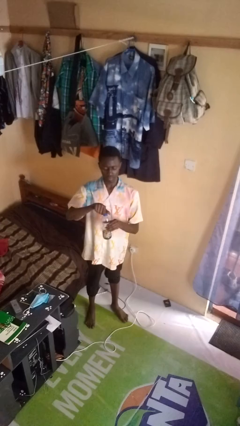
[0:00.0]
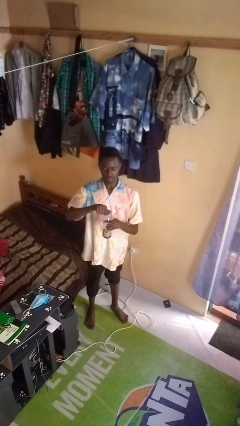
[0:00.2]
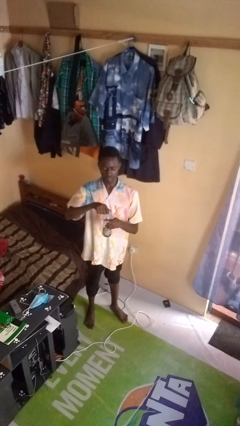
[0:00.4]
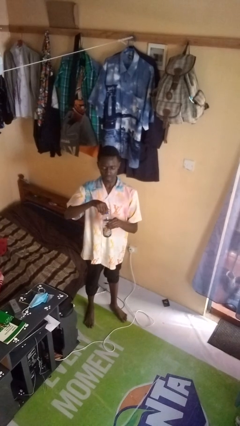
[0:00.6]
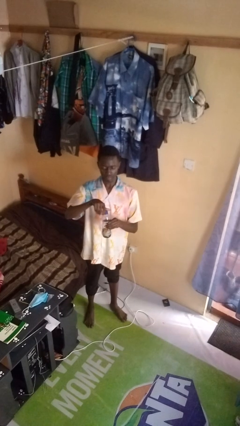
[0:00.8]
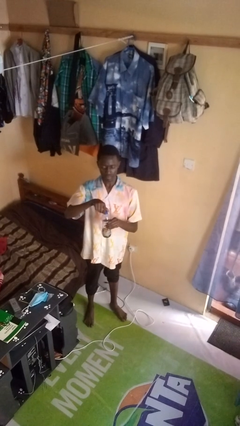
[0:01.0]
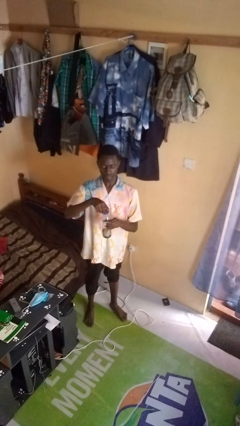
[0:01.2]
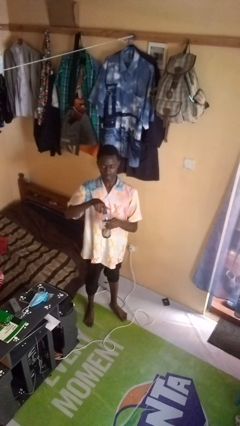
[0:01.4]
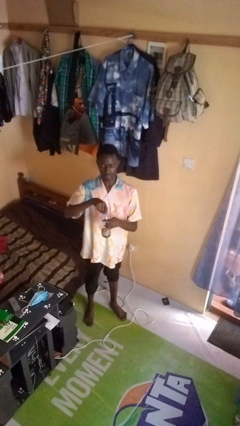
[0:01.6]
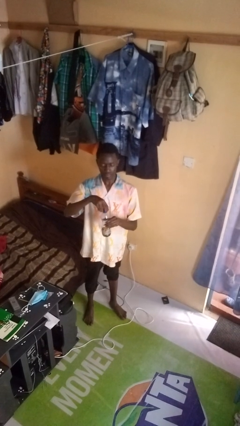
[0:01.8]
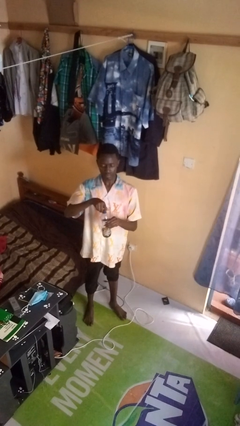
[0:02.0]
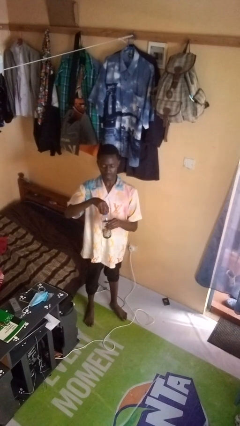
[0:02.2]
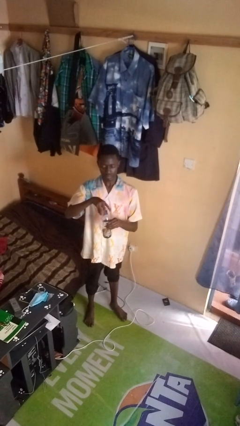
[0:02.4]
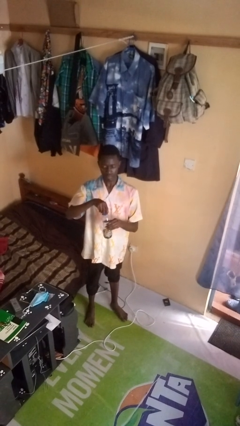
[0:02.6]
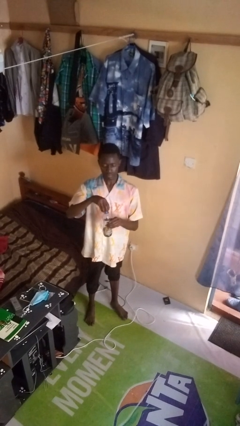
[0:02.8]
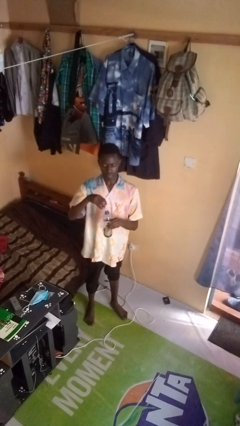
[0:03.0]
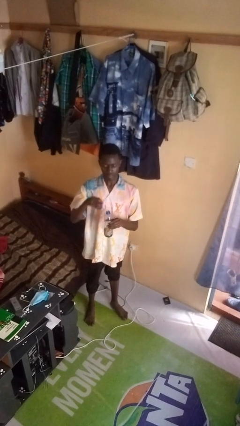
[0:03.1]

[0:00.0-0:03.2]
person unscrews lid from bottle

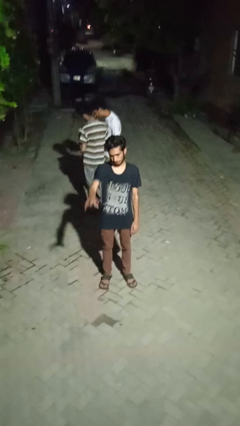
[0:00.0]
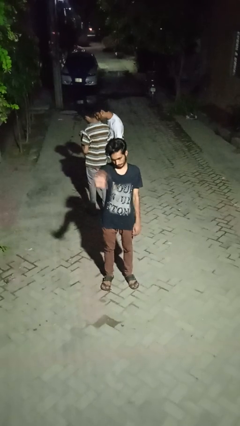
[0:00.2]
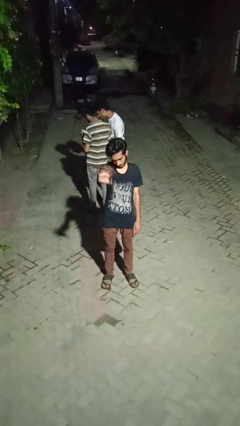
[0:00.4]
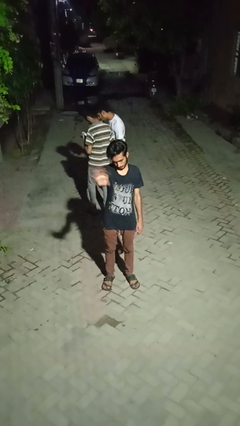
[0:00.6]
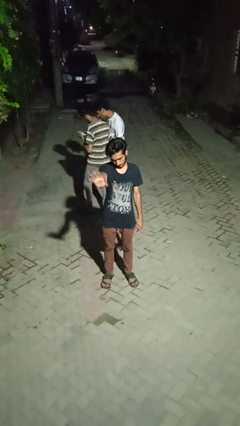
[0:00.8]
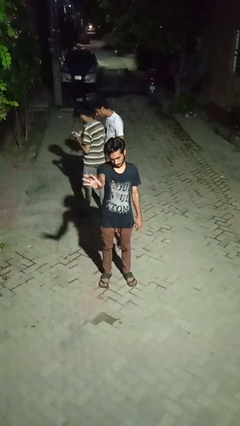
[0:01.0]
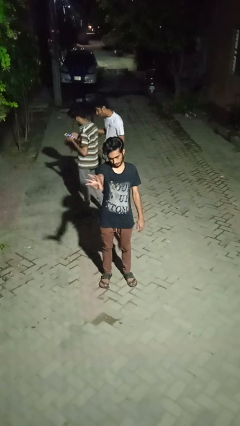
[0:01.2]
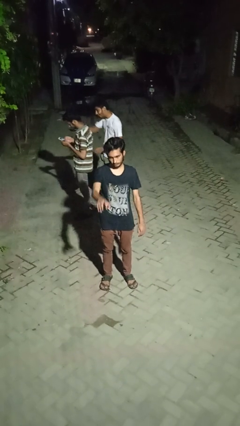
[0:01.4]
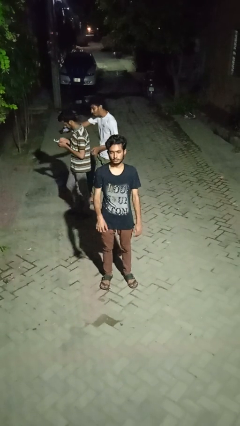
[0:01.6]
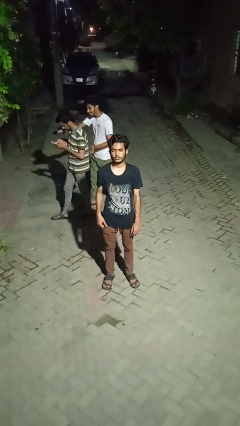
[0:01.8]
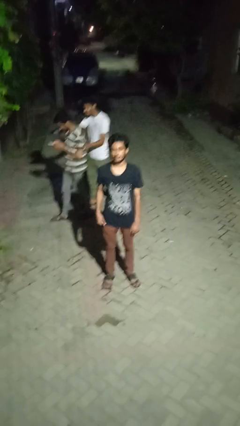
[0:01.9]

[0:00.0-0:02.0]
person waves at person

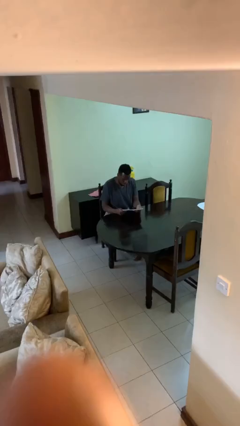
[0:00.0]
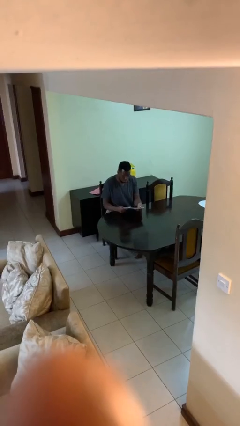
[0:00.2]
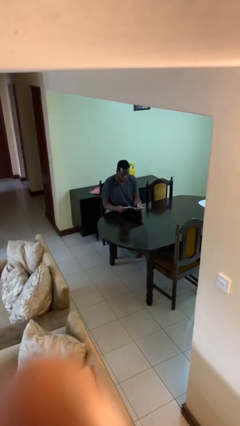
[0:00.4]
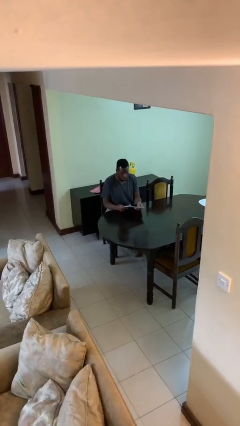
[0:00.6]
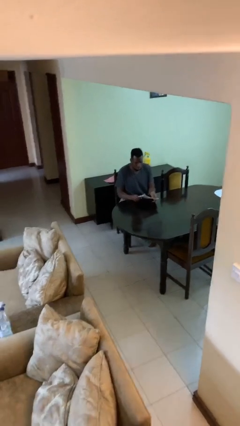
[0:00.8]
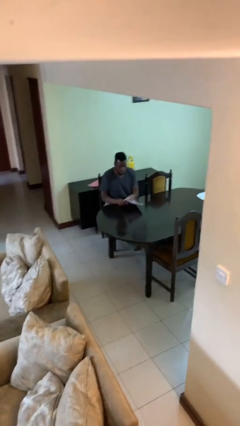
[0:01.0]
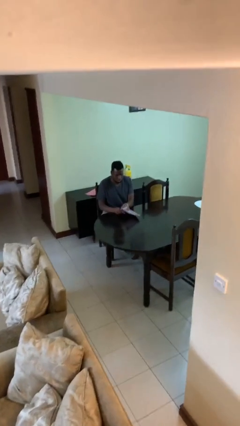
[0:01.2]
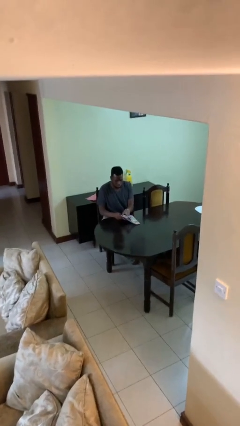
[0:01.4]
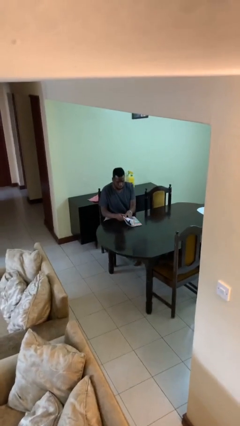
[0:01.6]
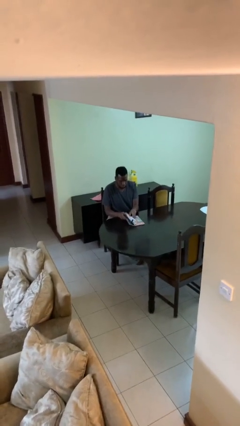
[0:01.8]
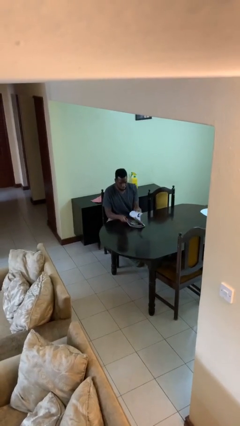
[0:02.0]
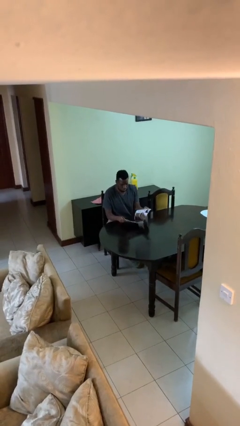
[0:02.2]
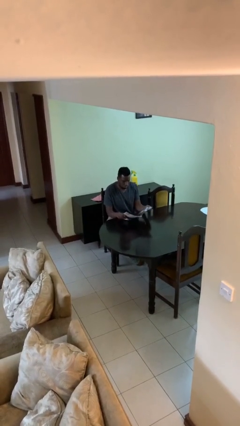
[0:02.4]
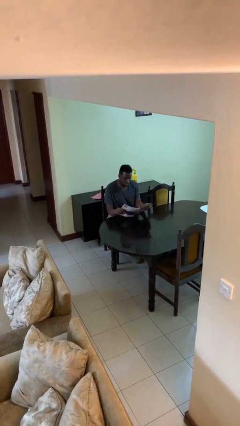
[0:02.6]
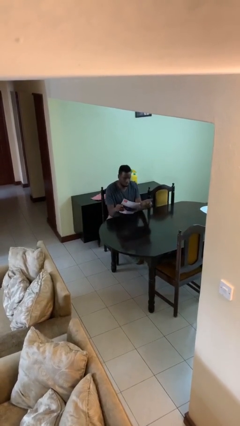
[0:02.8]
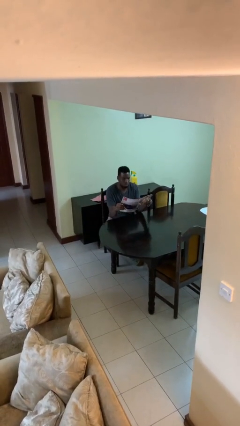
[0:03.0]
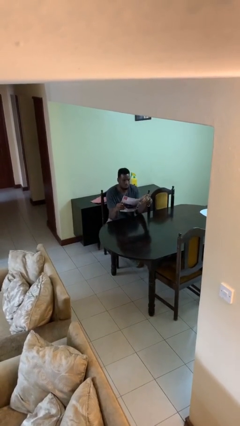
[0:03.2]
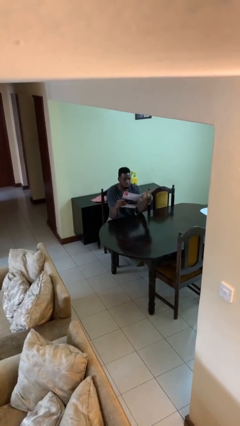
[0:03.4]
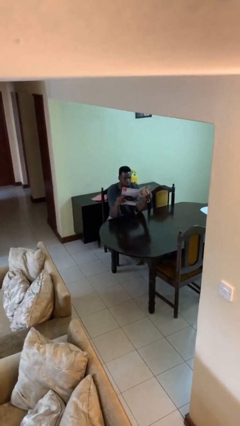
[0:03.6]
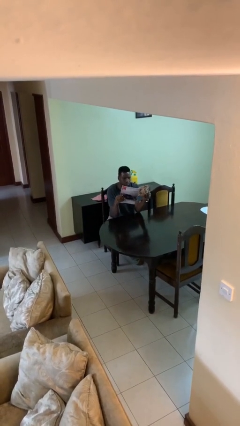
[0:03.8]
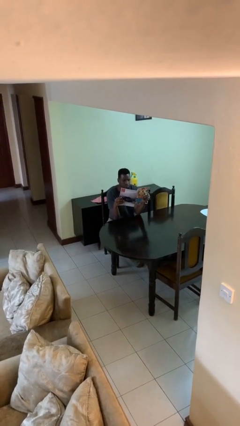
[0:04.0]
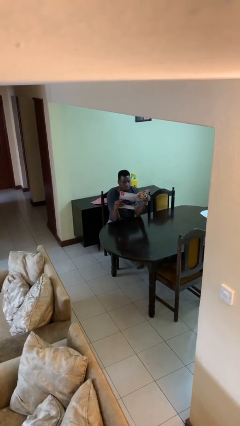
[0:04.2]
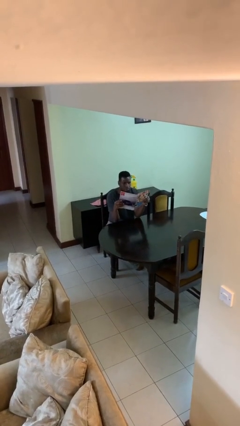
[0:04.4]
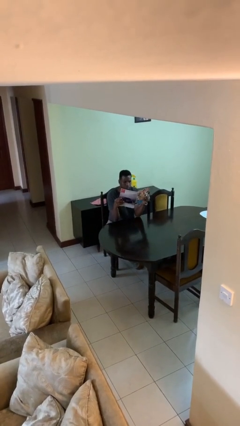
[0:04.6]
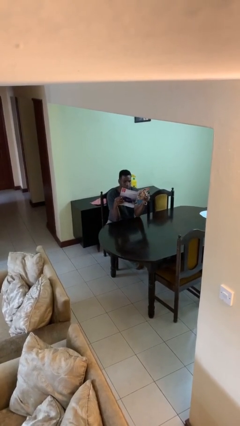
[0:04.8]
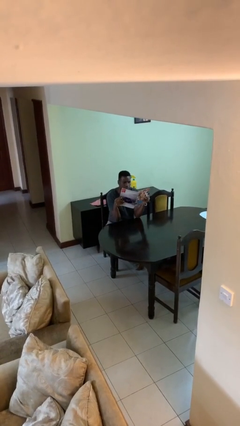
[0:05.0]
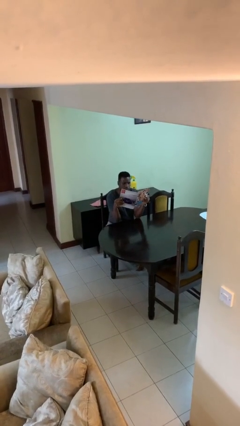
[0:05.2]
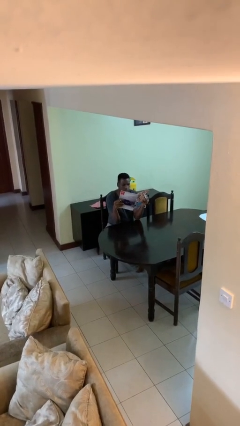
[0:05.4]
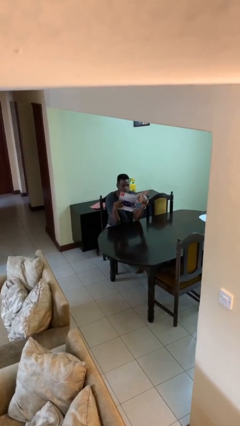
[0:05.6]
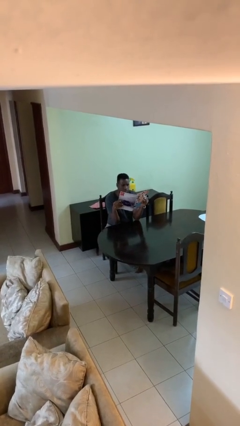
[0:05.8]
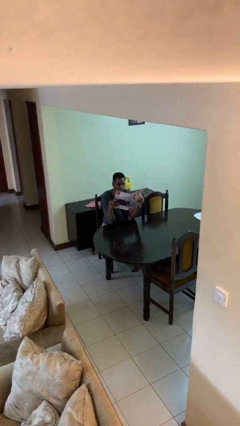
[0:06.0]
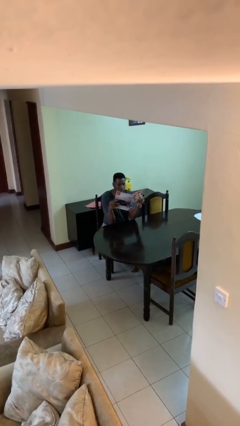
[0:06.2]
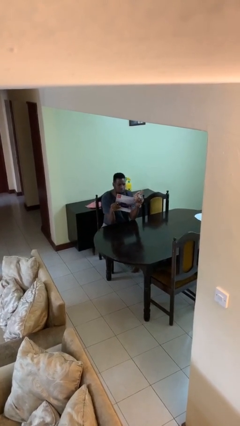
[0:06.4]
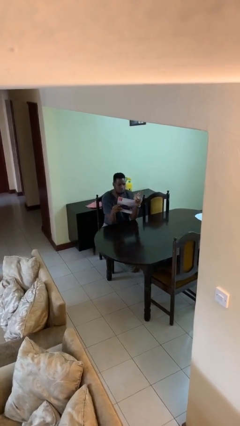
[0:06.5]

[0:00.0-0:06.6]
person reads document

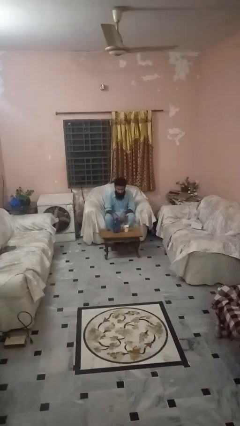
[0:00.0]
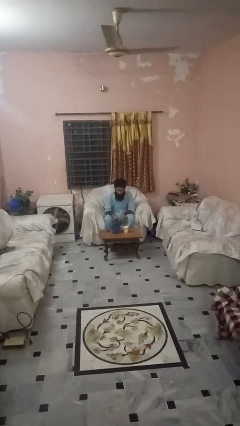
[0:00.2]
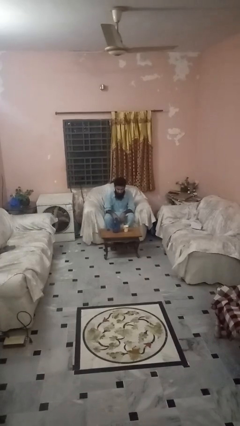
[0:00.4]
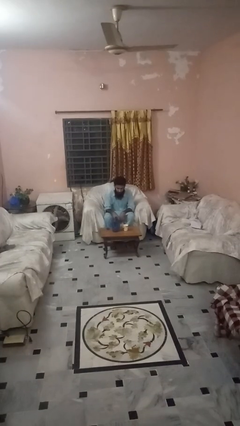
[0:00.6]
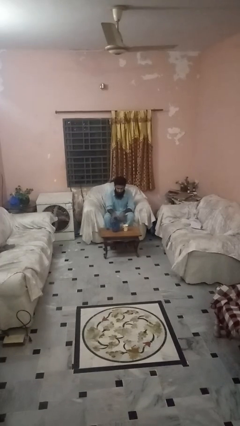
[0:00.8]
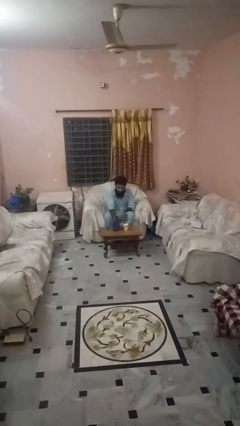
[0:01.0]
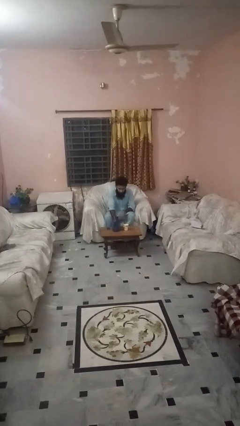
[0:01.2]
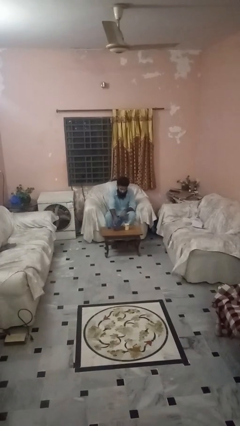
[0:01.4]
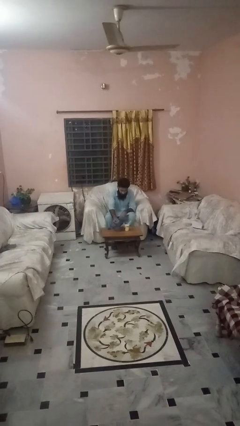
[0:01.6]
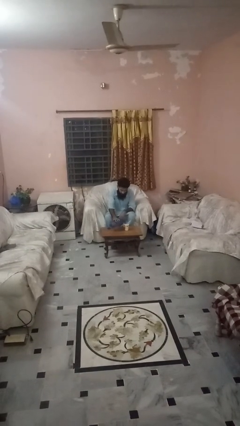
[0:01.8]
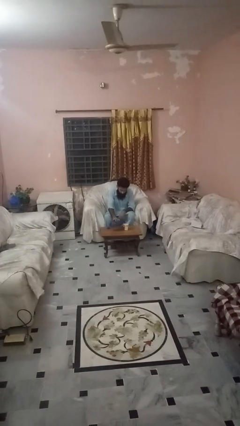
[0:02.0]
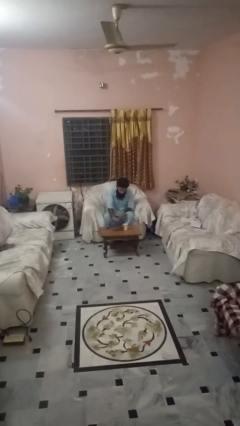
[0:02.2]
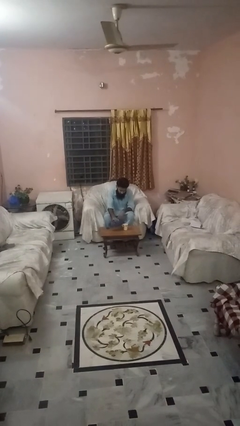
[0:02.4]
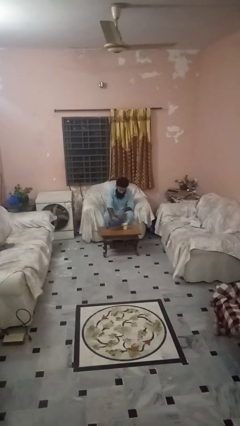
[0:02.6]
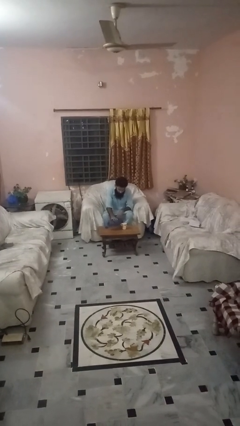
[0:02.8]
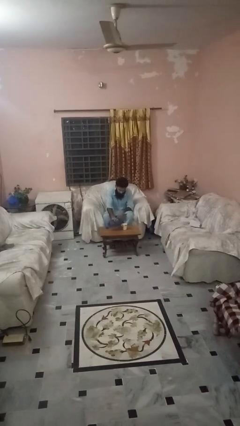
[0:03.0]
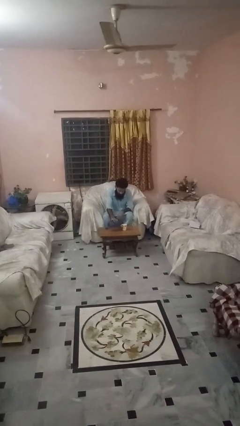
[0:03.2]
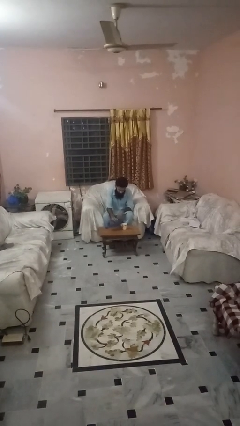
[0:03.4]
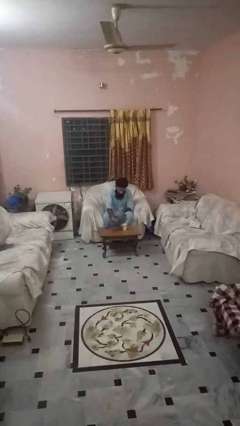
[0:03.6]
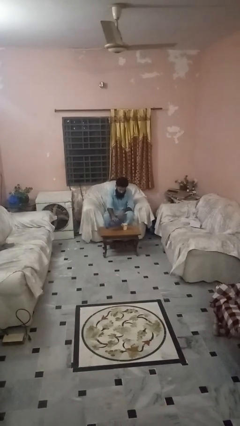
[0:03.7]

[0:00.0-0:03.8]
person pours liquid into cup

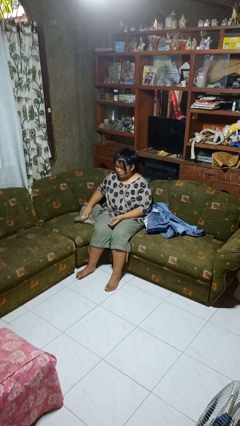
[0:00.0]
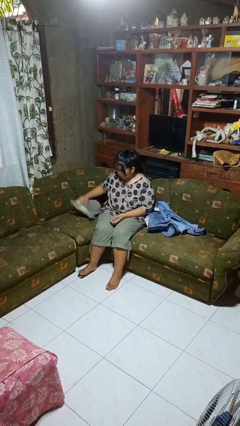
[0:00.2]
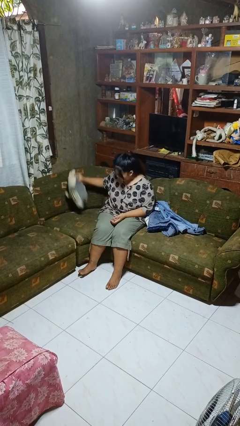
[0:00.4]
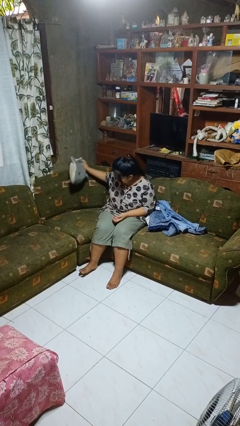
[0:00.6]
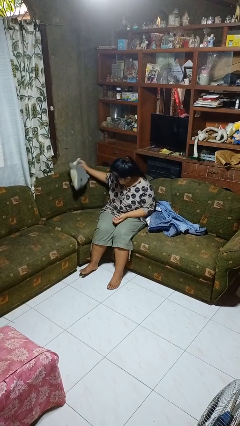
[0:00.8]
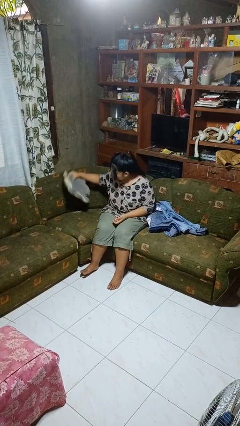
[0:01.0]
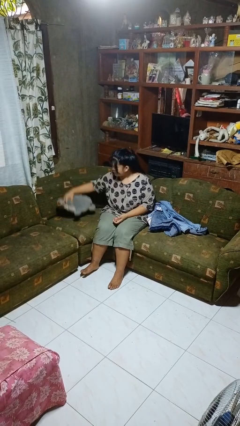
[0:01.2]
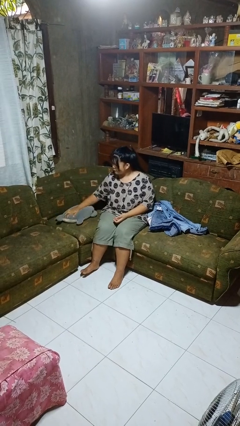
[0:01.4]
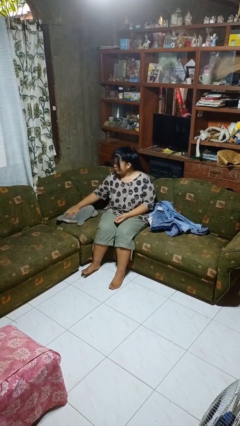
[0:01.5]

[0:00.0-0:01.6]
person searches in couch

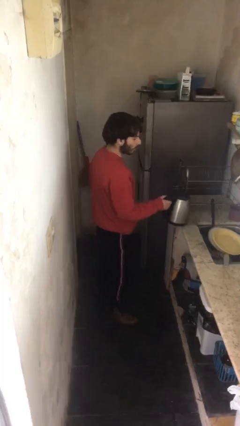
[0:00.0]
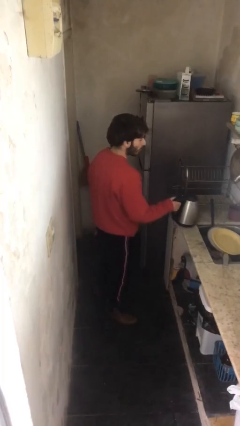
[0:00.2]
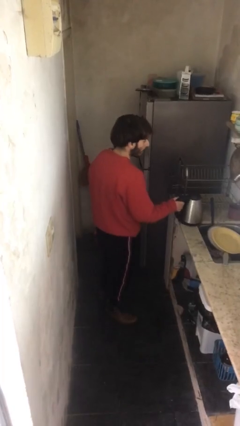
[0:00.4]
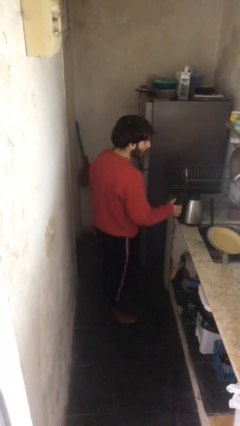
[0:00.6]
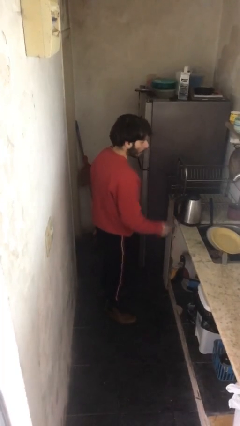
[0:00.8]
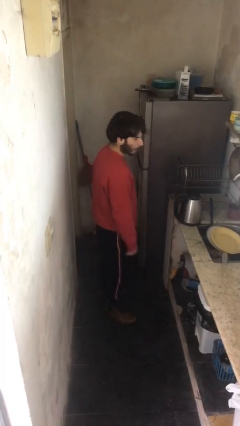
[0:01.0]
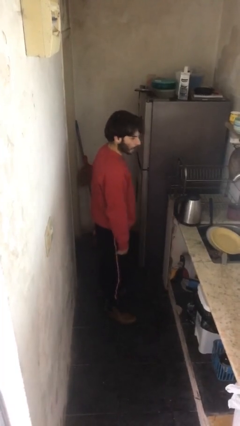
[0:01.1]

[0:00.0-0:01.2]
person puts down object on countertop
